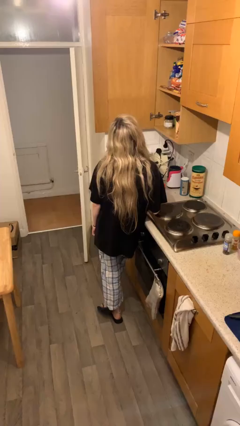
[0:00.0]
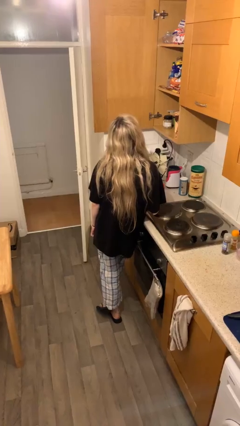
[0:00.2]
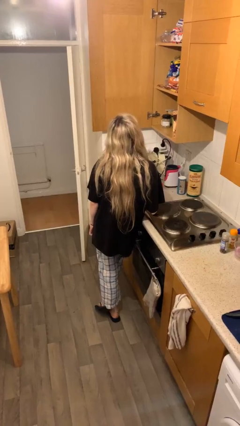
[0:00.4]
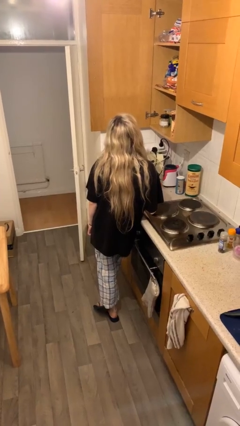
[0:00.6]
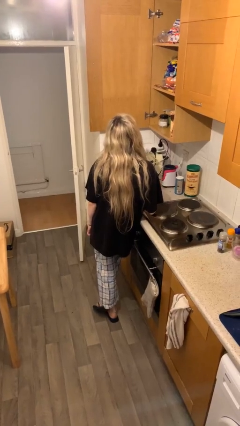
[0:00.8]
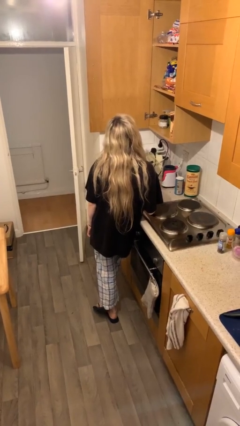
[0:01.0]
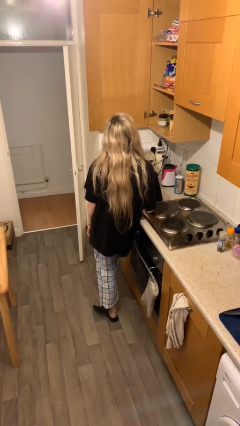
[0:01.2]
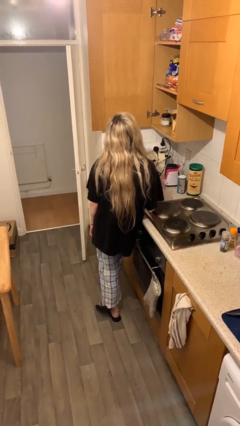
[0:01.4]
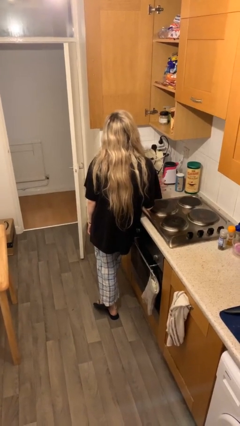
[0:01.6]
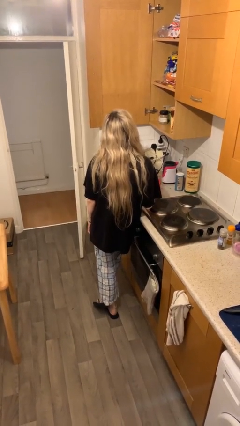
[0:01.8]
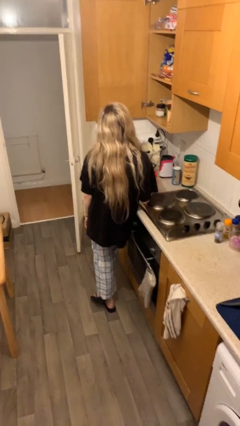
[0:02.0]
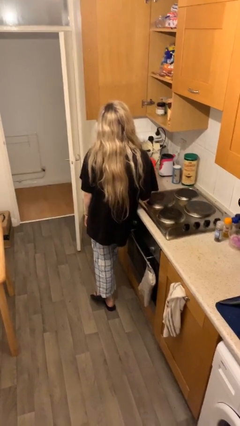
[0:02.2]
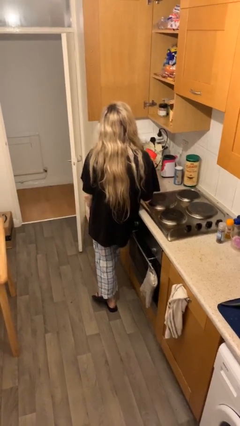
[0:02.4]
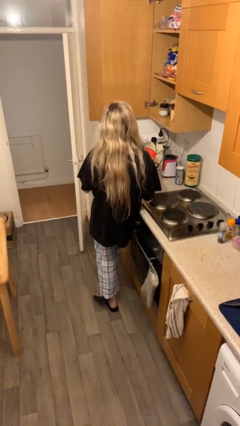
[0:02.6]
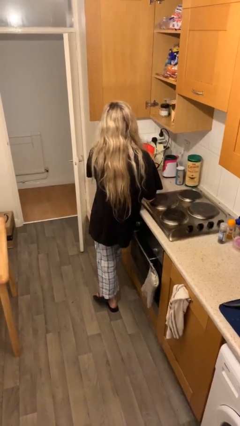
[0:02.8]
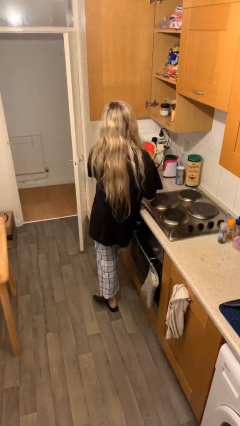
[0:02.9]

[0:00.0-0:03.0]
person picks up object from table

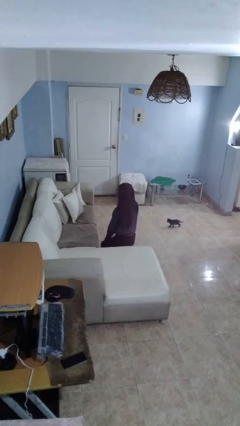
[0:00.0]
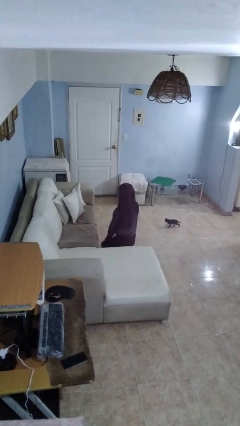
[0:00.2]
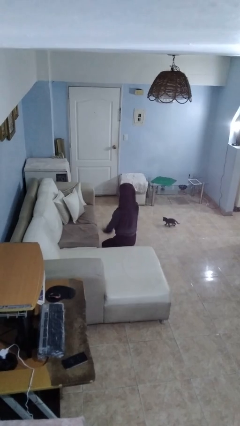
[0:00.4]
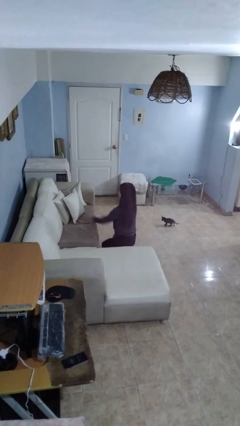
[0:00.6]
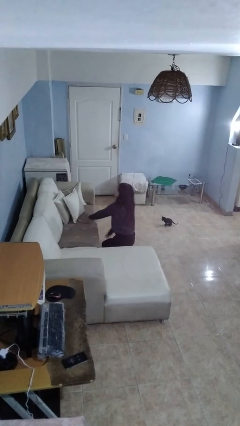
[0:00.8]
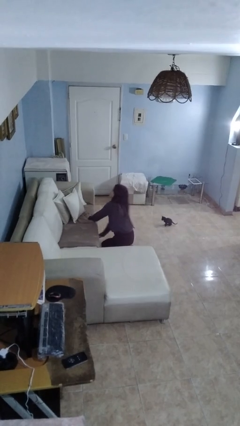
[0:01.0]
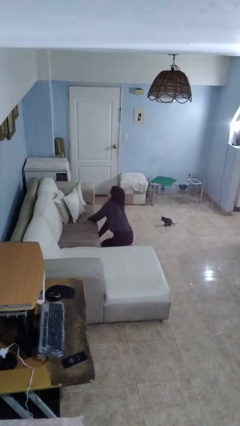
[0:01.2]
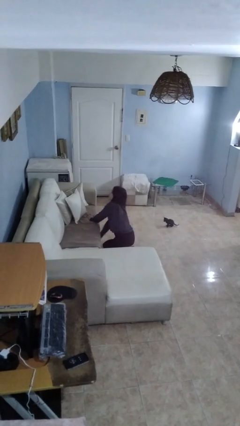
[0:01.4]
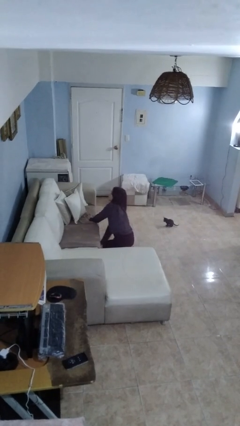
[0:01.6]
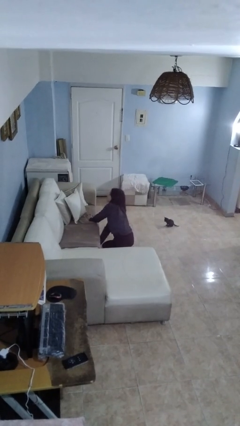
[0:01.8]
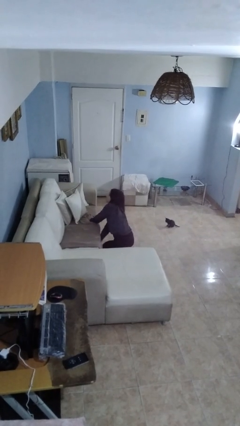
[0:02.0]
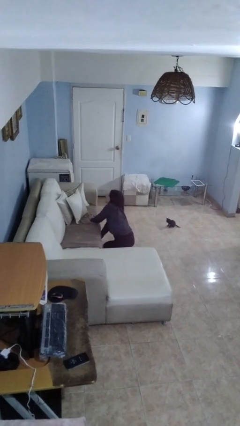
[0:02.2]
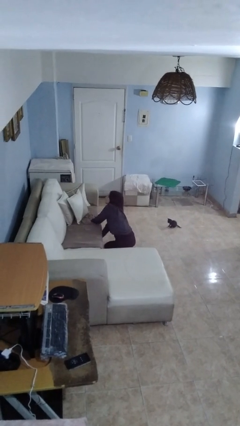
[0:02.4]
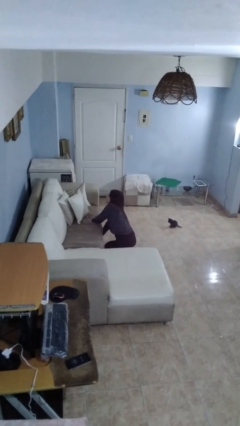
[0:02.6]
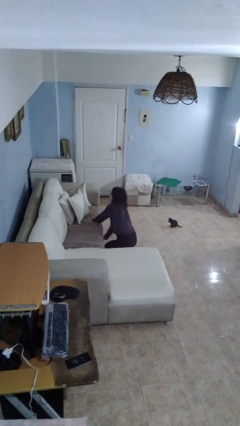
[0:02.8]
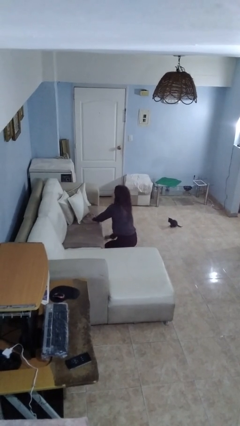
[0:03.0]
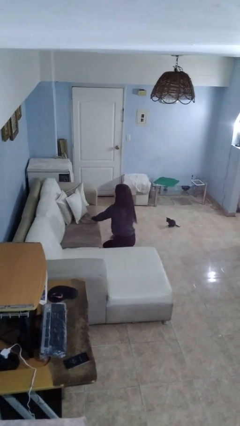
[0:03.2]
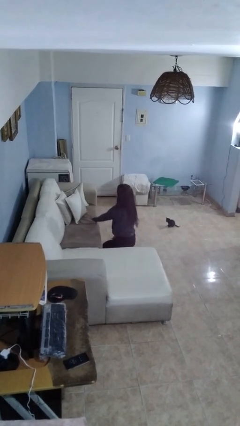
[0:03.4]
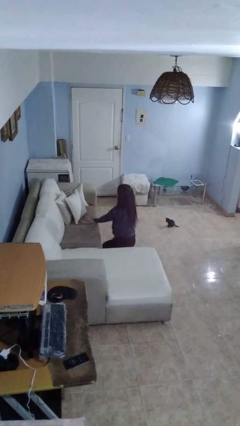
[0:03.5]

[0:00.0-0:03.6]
person searches under couch

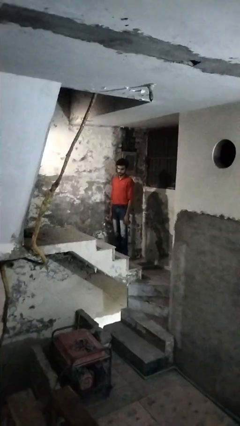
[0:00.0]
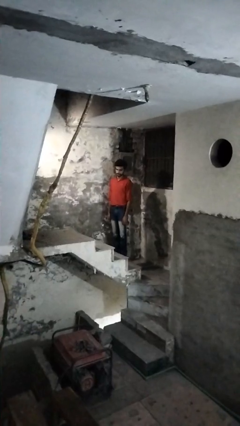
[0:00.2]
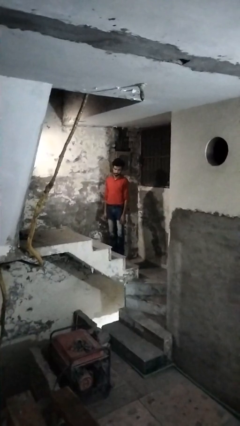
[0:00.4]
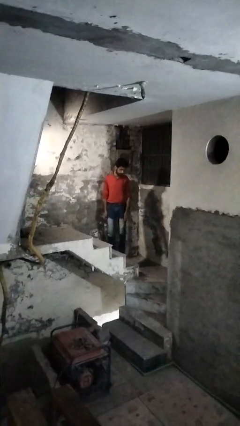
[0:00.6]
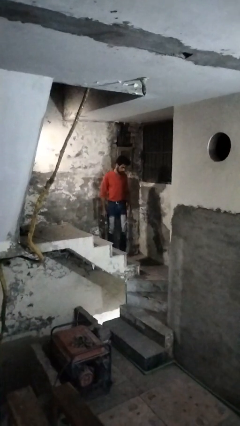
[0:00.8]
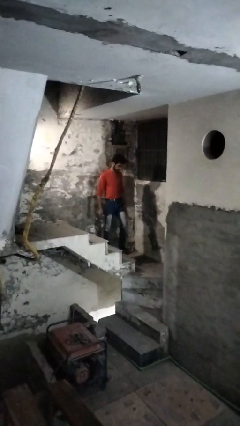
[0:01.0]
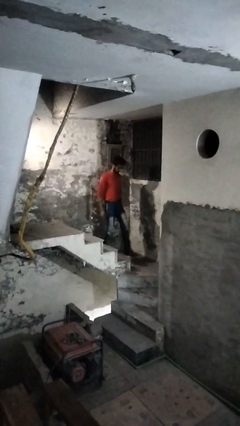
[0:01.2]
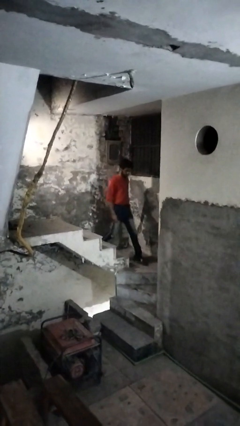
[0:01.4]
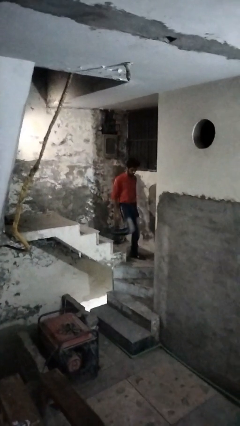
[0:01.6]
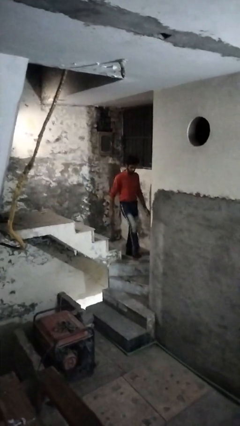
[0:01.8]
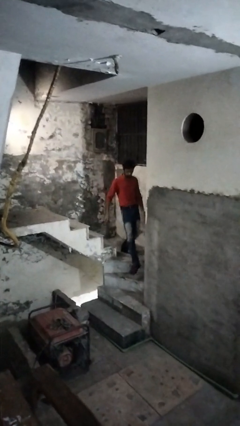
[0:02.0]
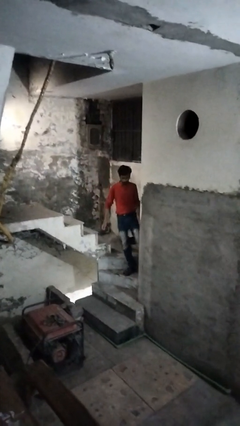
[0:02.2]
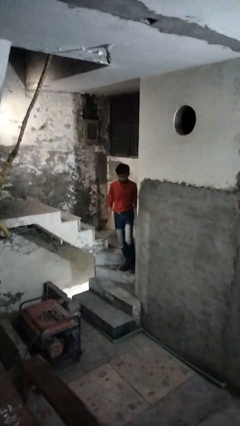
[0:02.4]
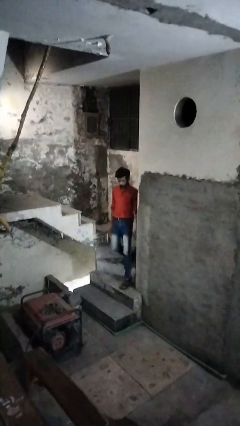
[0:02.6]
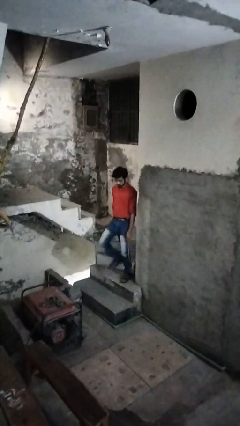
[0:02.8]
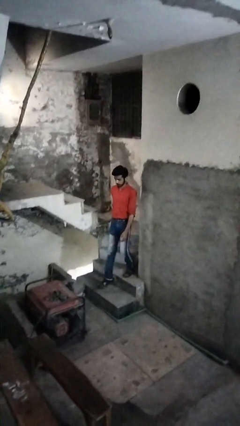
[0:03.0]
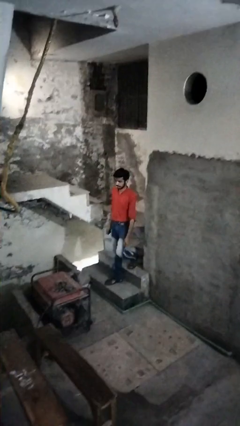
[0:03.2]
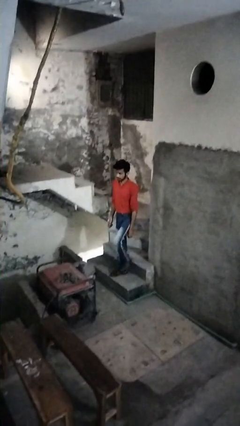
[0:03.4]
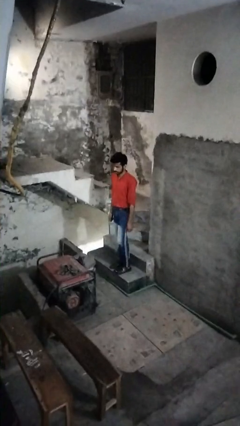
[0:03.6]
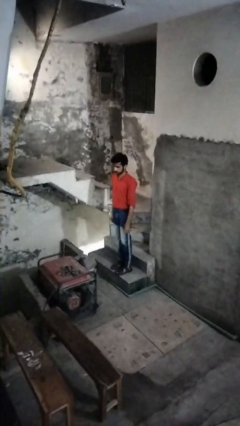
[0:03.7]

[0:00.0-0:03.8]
person climbs down stairs

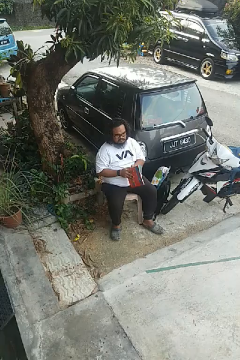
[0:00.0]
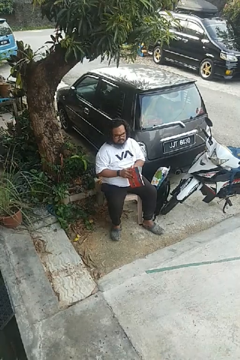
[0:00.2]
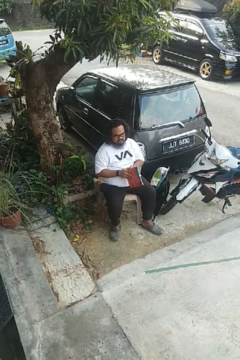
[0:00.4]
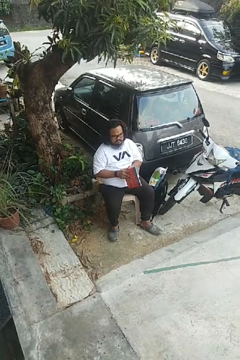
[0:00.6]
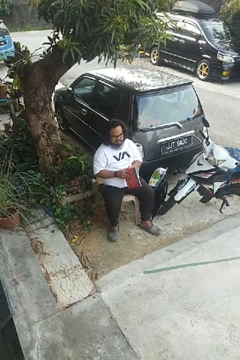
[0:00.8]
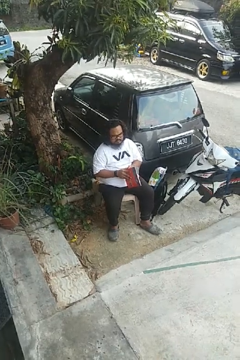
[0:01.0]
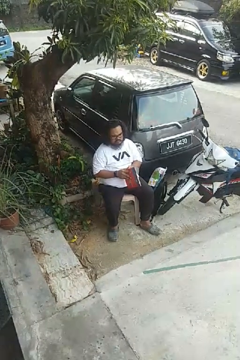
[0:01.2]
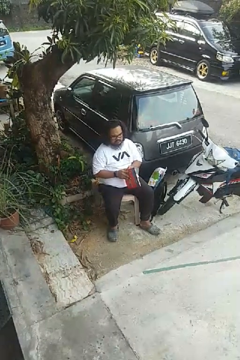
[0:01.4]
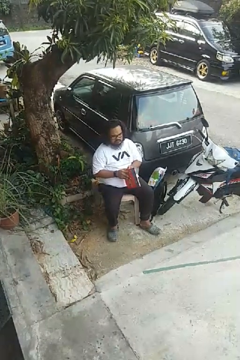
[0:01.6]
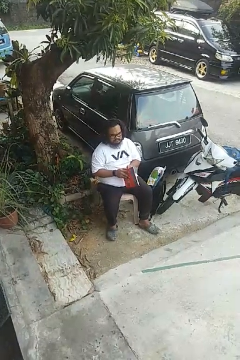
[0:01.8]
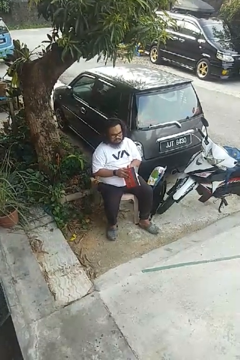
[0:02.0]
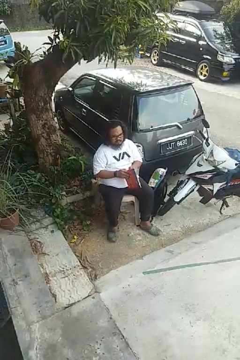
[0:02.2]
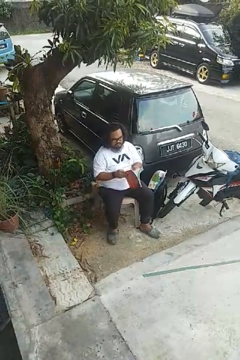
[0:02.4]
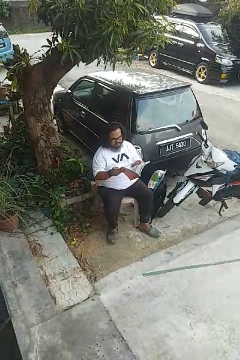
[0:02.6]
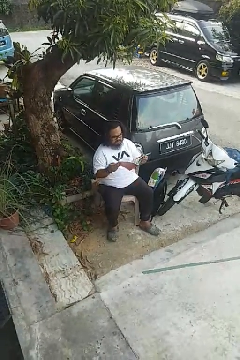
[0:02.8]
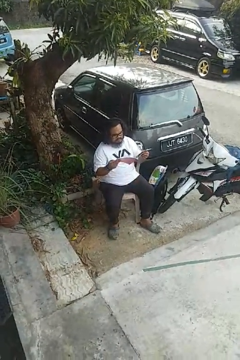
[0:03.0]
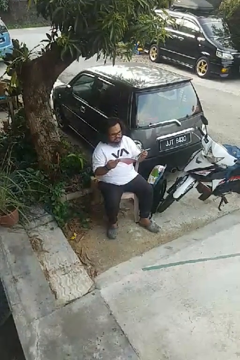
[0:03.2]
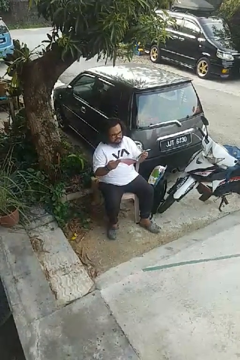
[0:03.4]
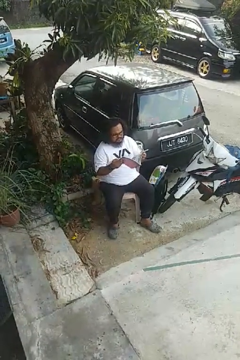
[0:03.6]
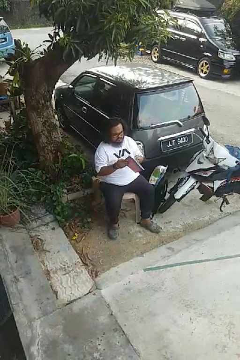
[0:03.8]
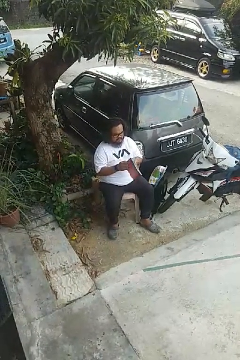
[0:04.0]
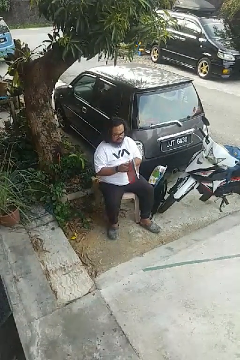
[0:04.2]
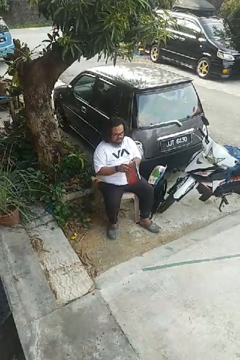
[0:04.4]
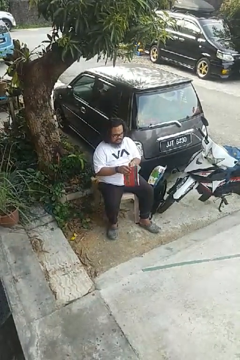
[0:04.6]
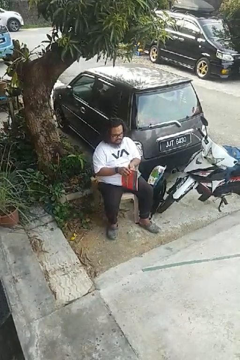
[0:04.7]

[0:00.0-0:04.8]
person reads magazine

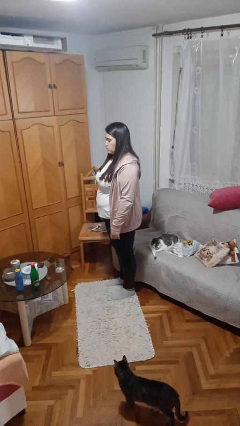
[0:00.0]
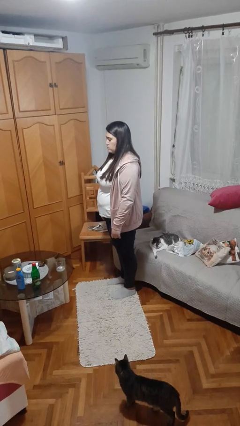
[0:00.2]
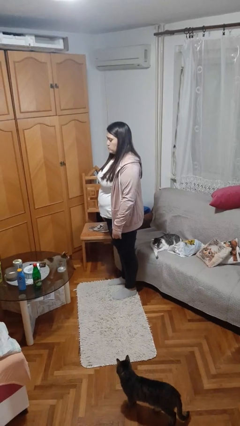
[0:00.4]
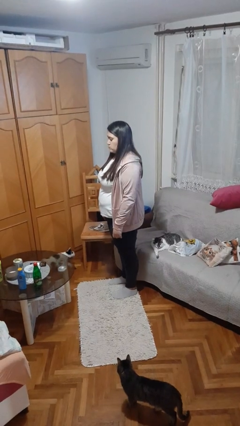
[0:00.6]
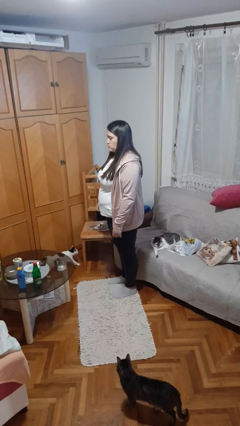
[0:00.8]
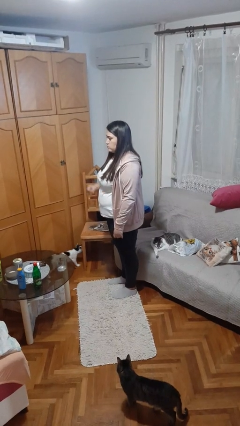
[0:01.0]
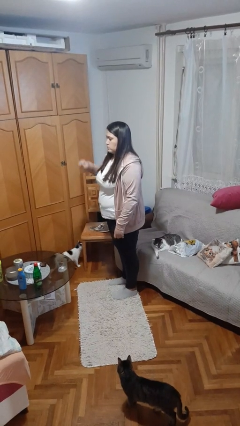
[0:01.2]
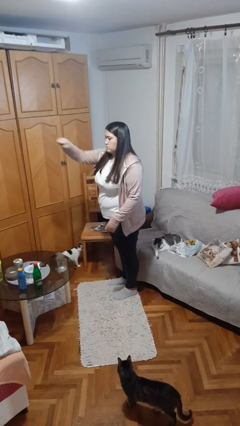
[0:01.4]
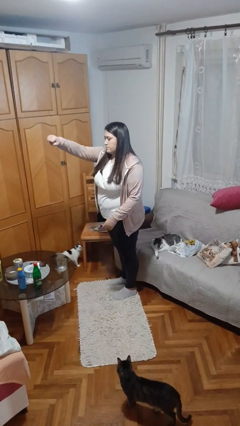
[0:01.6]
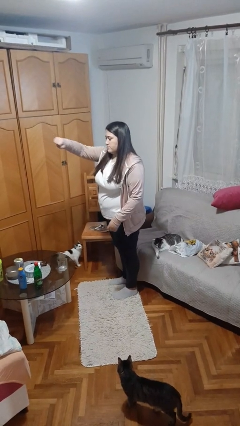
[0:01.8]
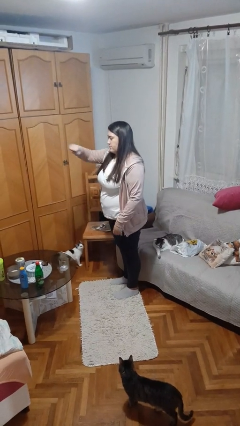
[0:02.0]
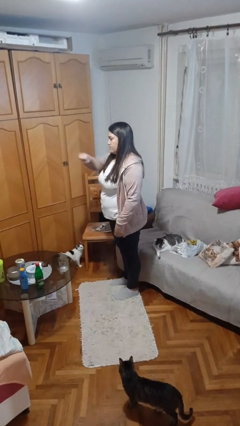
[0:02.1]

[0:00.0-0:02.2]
person punches

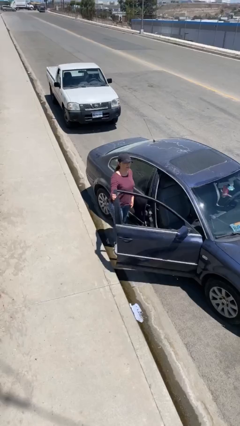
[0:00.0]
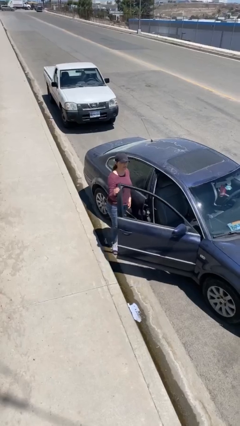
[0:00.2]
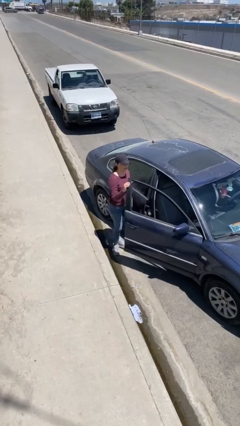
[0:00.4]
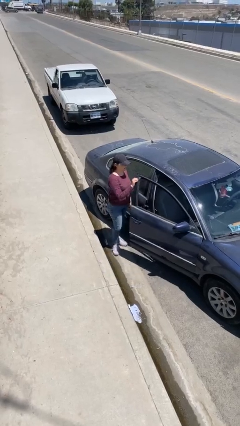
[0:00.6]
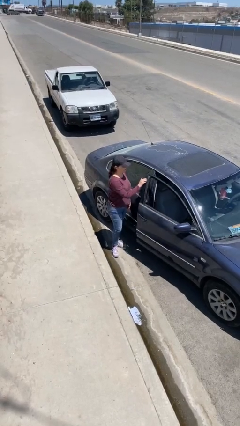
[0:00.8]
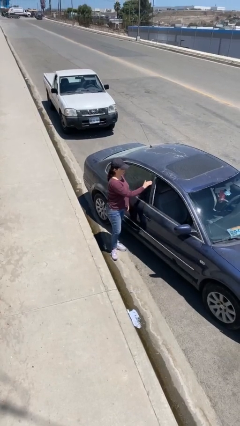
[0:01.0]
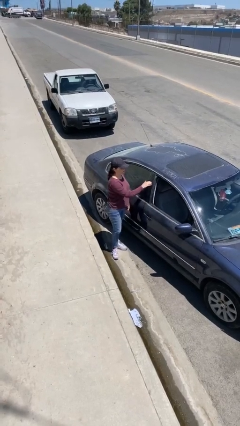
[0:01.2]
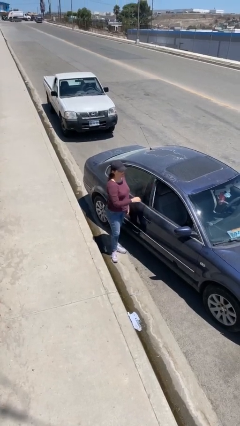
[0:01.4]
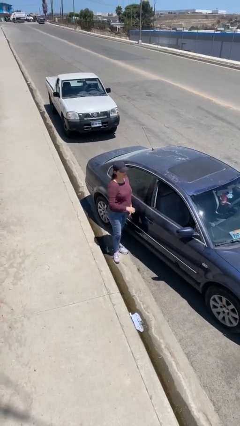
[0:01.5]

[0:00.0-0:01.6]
person closes car door
